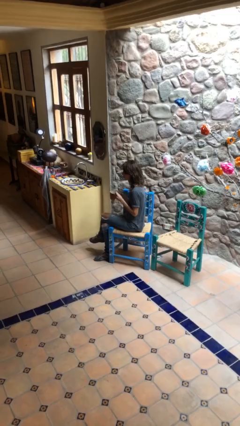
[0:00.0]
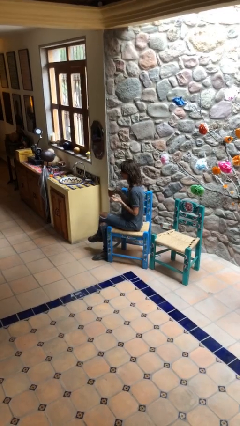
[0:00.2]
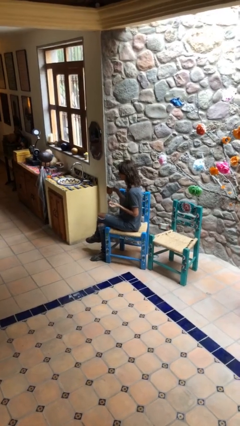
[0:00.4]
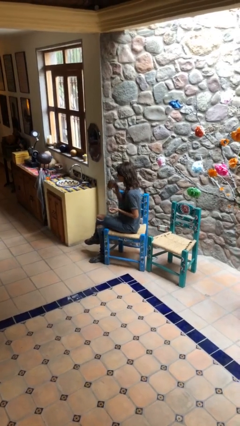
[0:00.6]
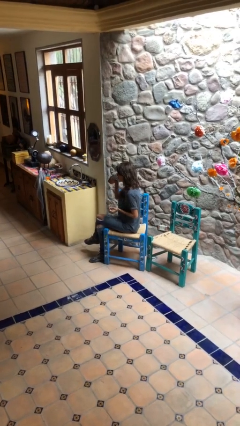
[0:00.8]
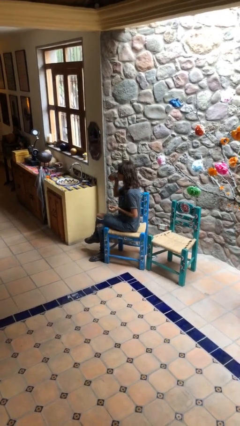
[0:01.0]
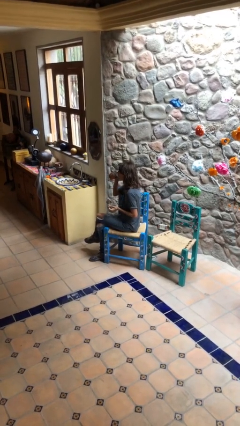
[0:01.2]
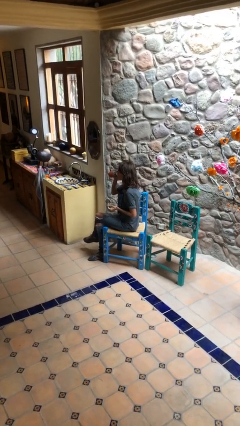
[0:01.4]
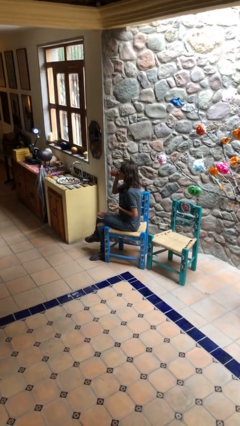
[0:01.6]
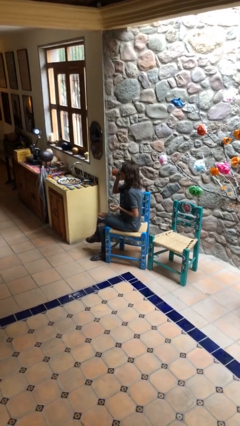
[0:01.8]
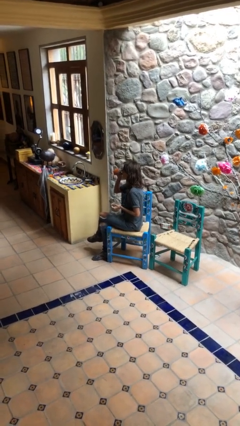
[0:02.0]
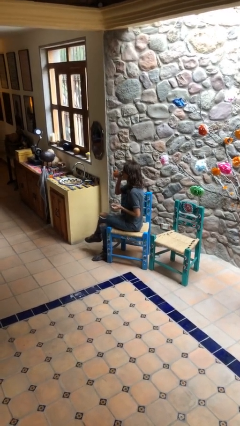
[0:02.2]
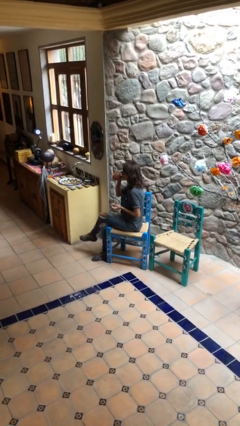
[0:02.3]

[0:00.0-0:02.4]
person drinks from mug

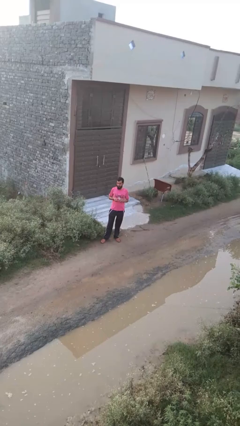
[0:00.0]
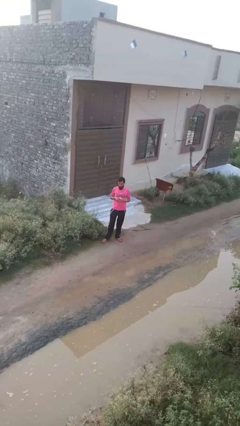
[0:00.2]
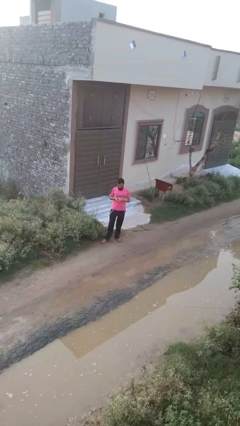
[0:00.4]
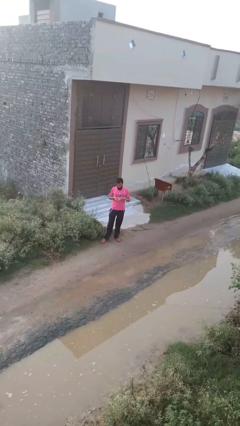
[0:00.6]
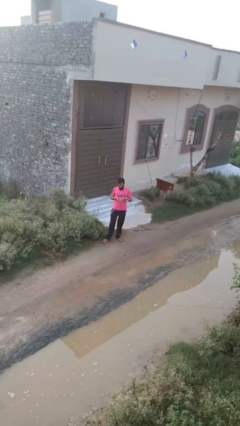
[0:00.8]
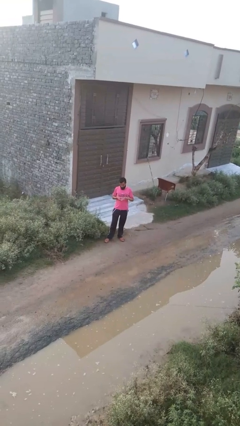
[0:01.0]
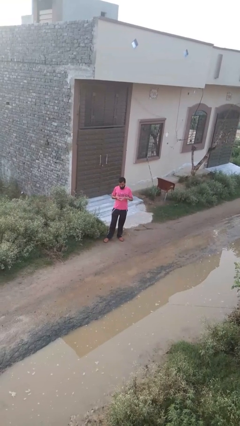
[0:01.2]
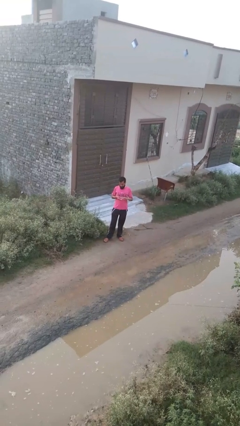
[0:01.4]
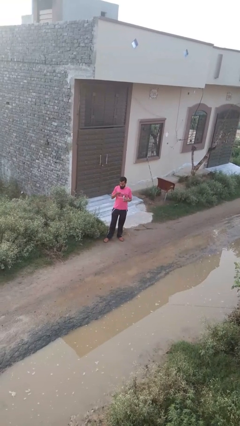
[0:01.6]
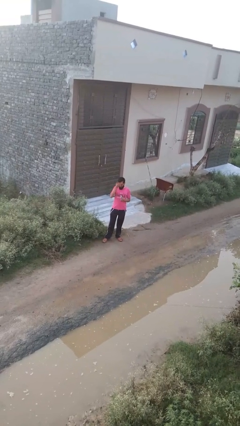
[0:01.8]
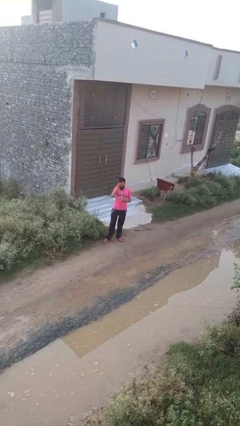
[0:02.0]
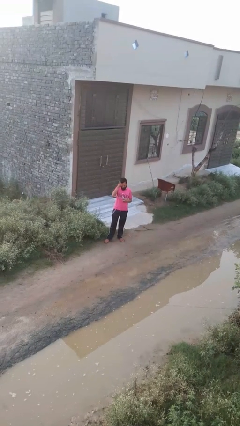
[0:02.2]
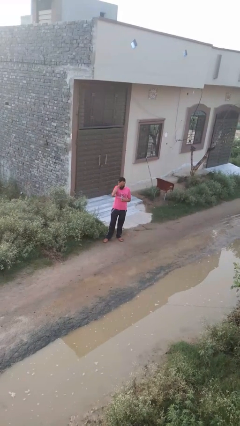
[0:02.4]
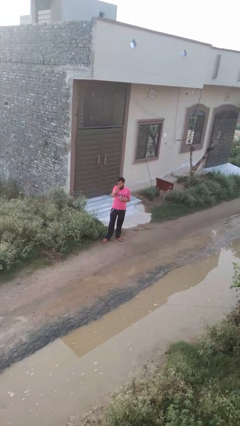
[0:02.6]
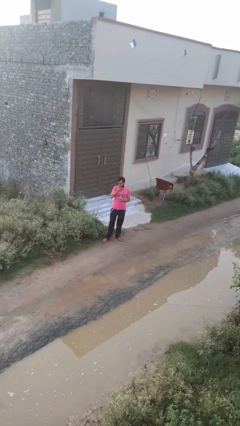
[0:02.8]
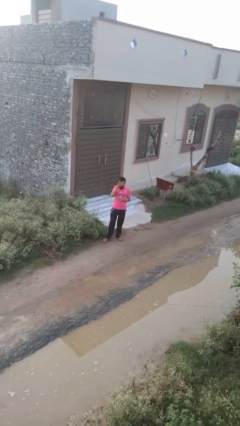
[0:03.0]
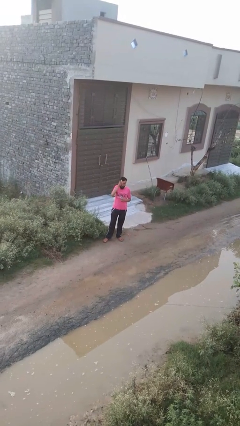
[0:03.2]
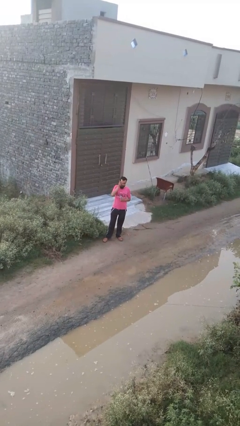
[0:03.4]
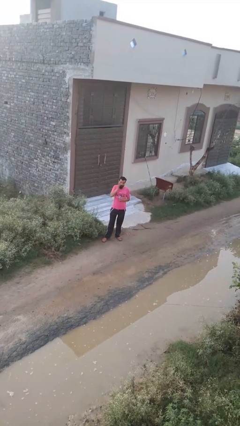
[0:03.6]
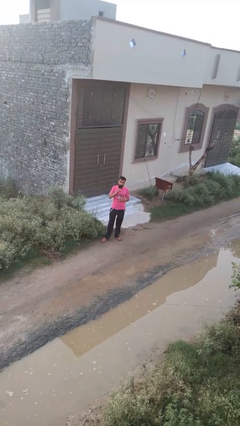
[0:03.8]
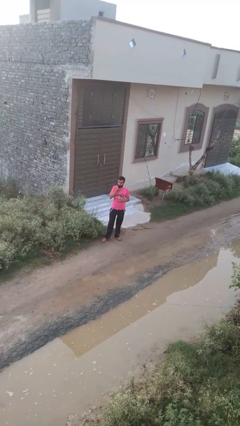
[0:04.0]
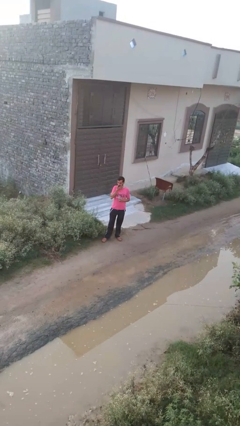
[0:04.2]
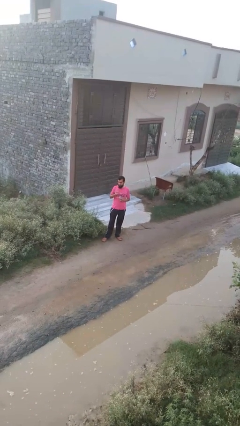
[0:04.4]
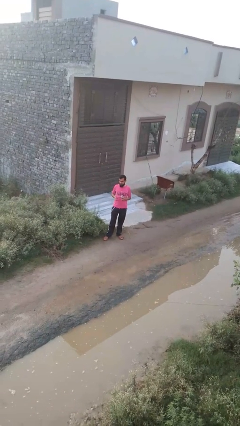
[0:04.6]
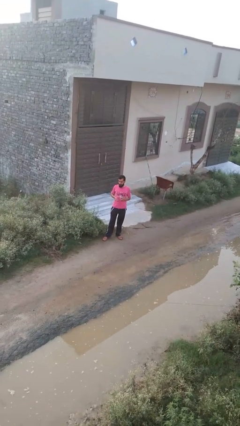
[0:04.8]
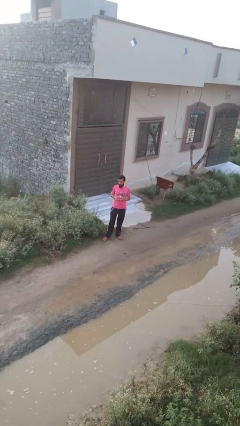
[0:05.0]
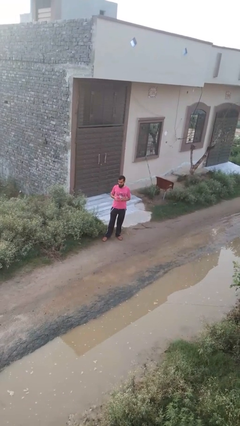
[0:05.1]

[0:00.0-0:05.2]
person applies facial moisturizer

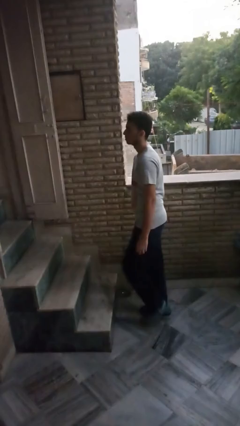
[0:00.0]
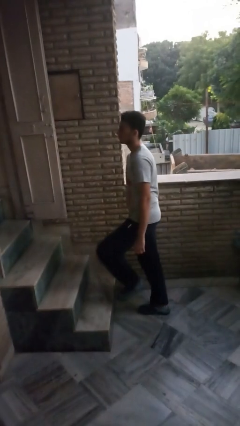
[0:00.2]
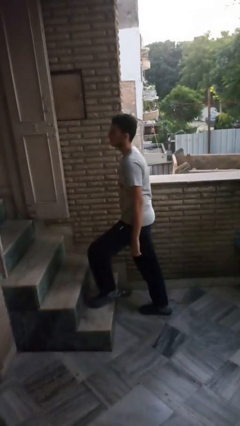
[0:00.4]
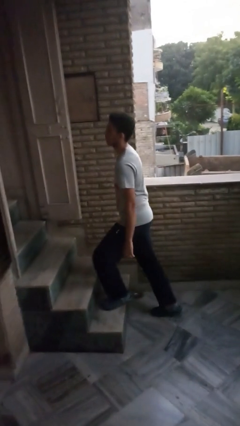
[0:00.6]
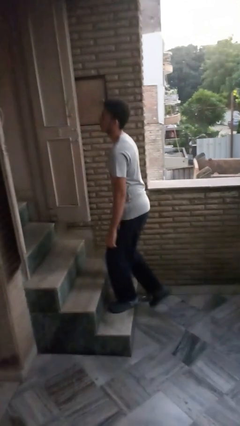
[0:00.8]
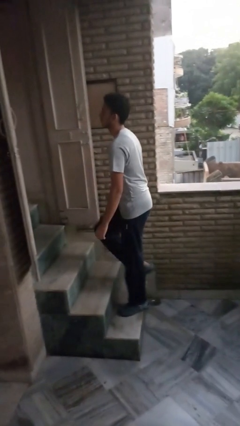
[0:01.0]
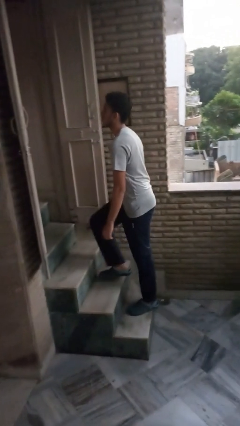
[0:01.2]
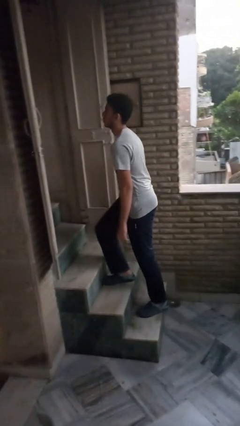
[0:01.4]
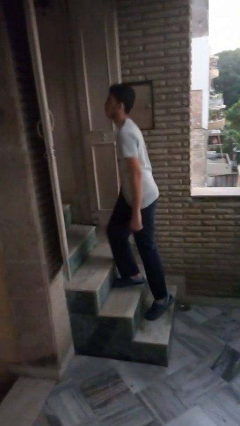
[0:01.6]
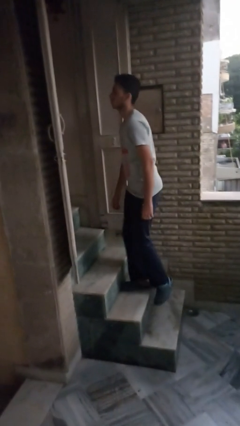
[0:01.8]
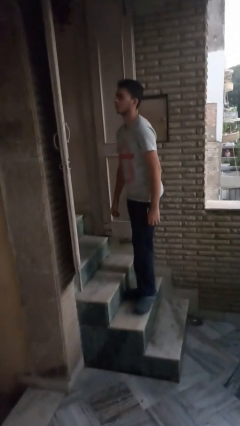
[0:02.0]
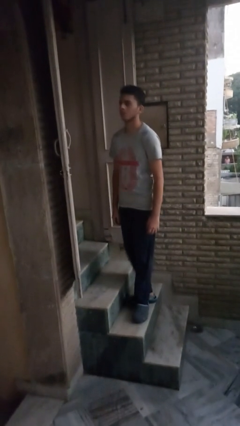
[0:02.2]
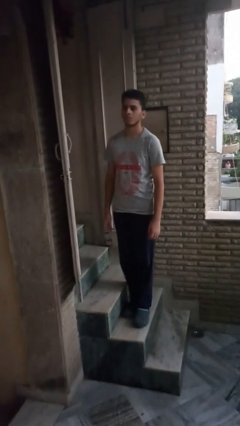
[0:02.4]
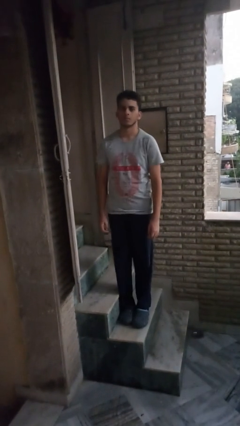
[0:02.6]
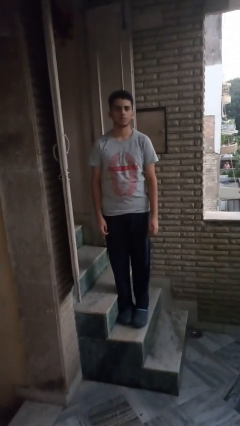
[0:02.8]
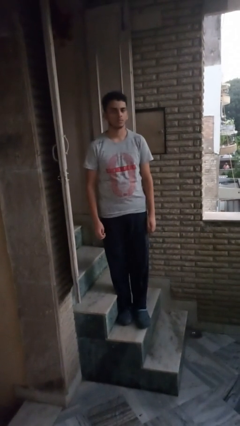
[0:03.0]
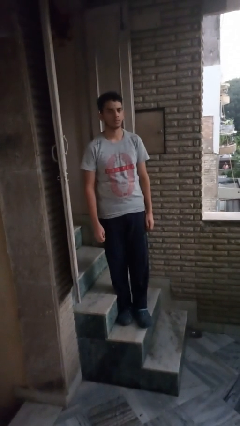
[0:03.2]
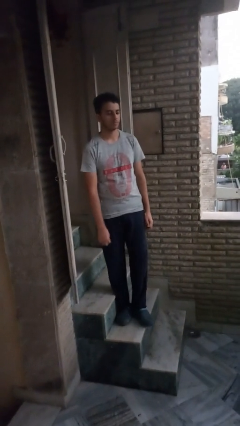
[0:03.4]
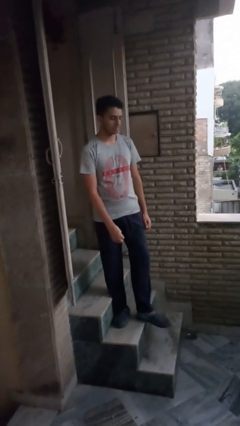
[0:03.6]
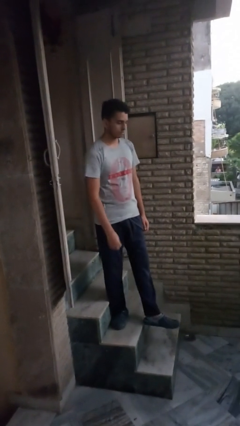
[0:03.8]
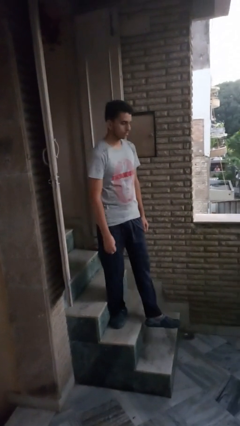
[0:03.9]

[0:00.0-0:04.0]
person climbs up stairs

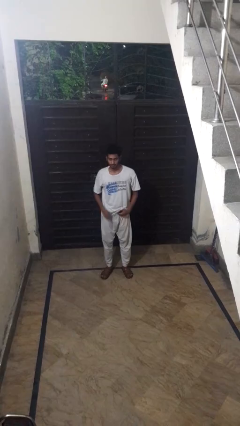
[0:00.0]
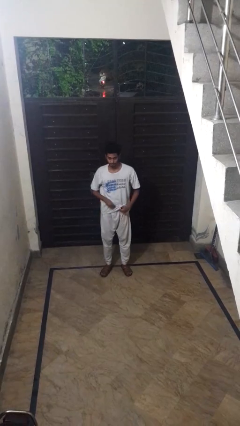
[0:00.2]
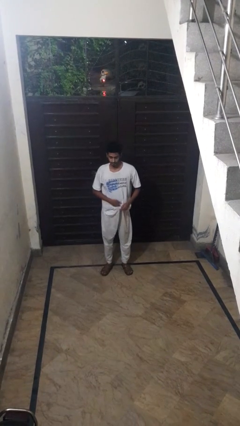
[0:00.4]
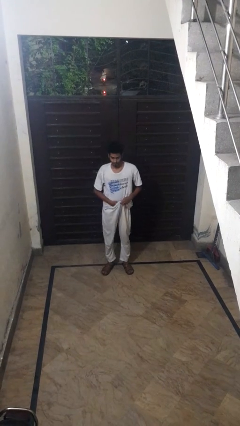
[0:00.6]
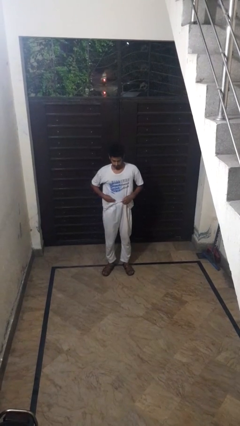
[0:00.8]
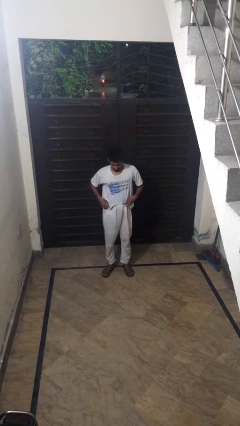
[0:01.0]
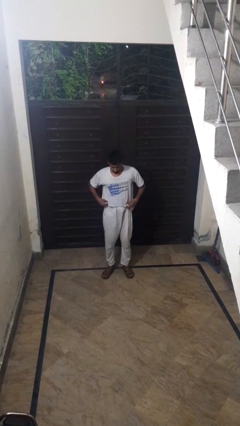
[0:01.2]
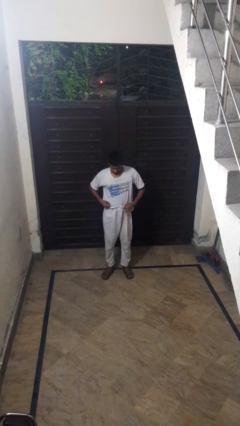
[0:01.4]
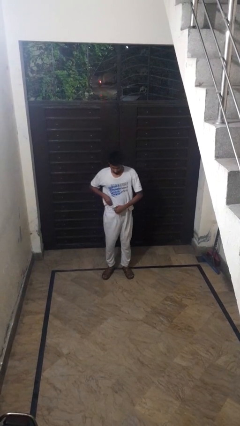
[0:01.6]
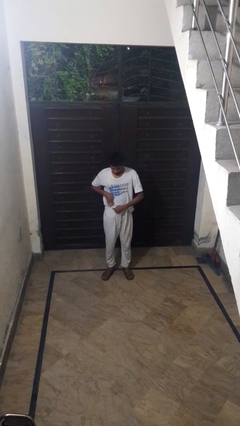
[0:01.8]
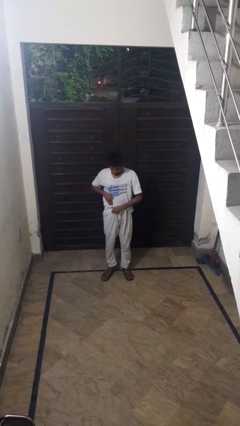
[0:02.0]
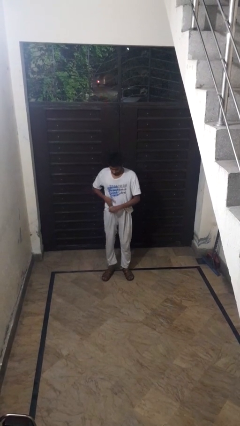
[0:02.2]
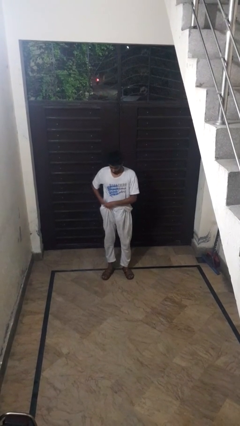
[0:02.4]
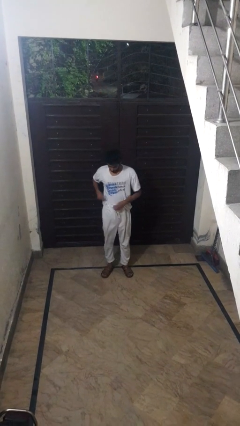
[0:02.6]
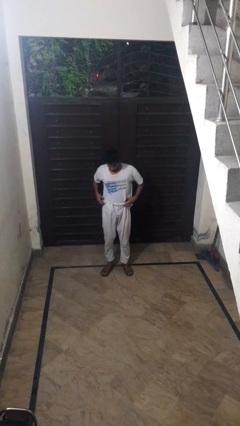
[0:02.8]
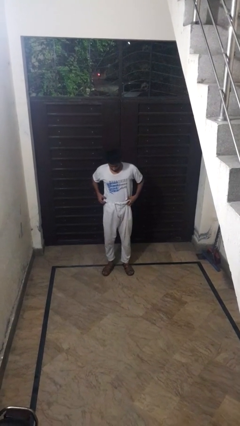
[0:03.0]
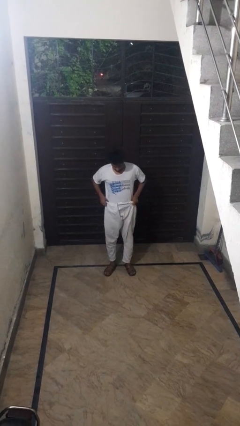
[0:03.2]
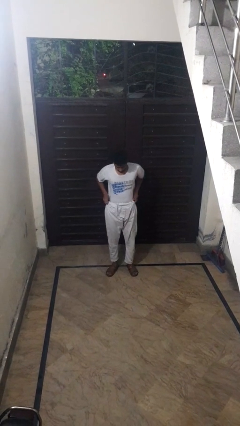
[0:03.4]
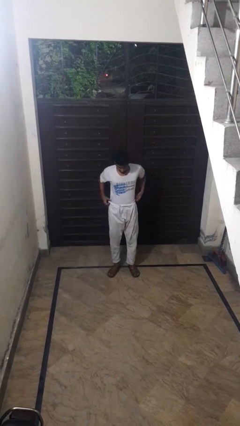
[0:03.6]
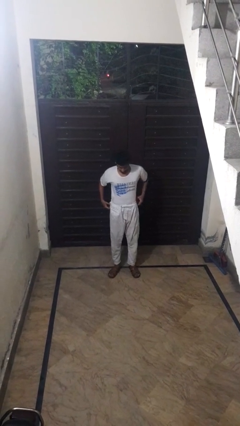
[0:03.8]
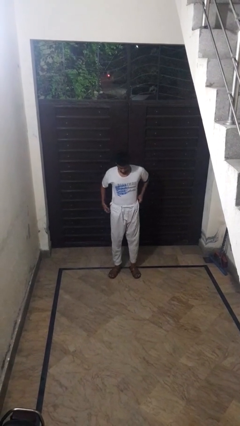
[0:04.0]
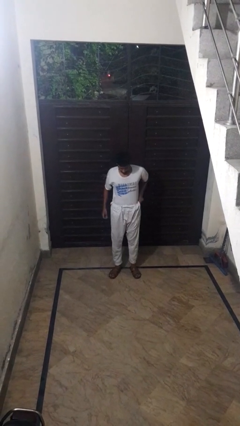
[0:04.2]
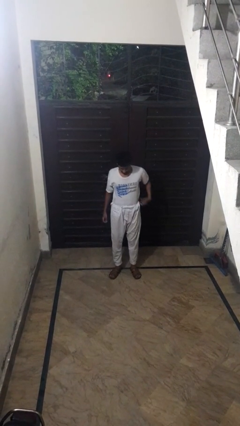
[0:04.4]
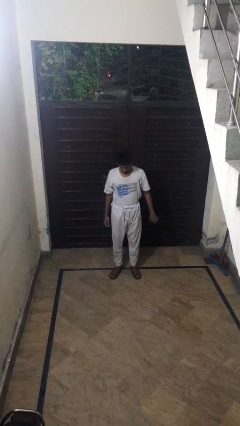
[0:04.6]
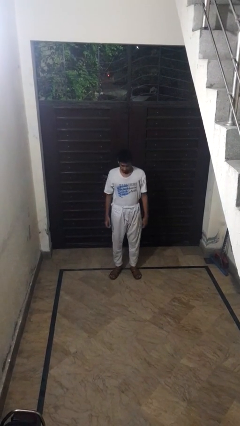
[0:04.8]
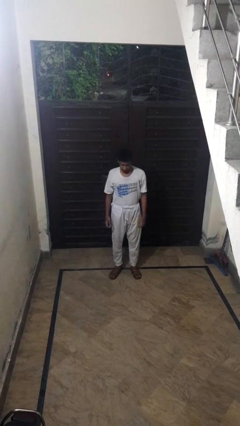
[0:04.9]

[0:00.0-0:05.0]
person tucks in shirt

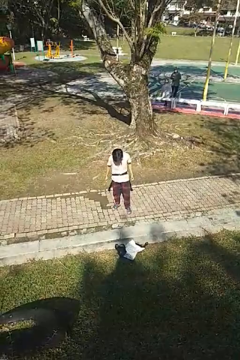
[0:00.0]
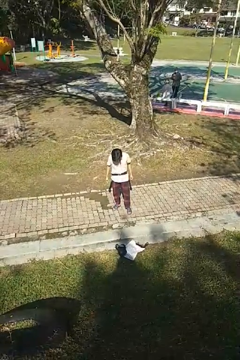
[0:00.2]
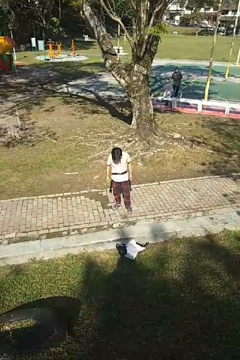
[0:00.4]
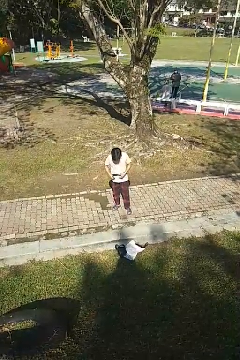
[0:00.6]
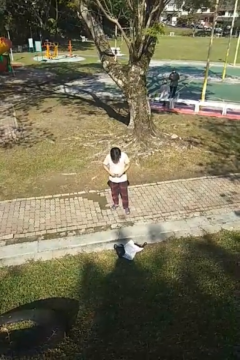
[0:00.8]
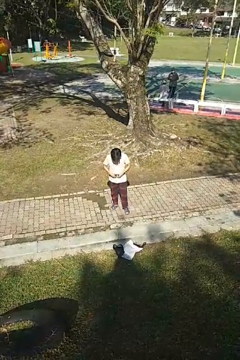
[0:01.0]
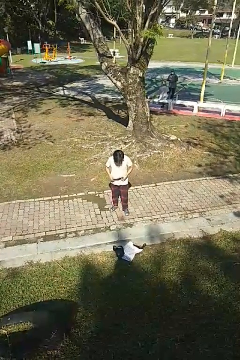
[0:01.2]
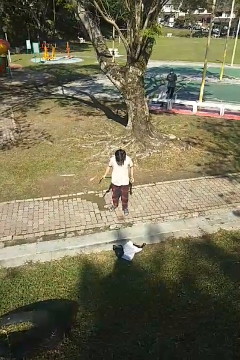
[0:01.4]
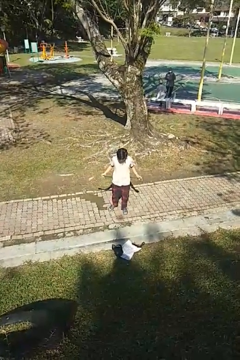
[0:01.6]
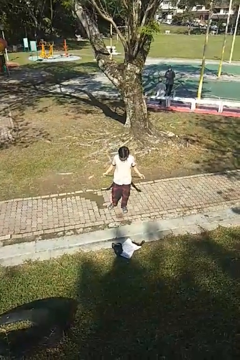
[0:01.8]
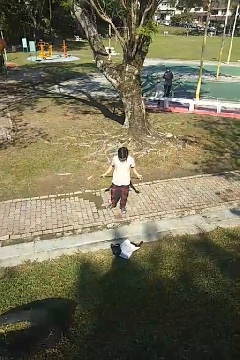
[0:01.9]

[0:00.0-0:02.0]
person takes off belt
